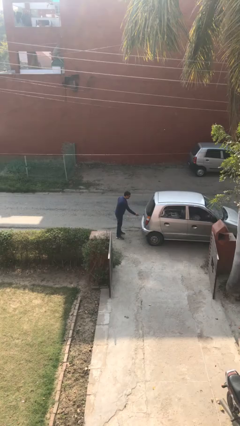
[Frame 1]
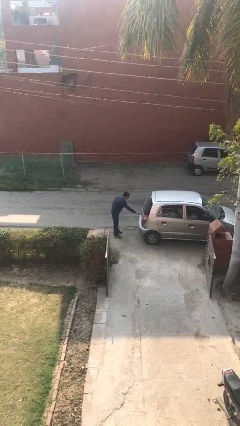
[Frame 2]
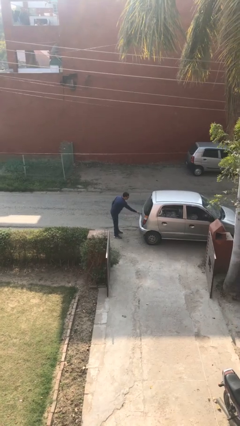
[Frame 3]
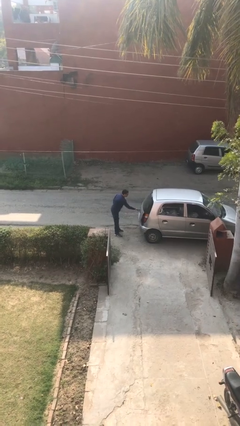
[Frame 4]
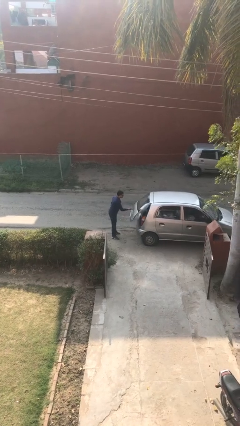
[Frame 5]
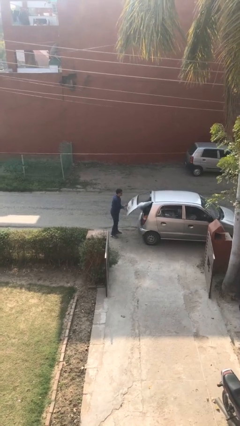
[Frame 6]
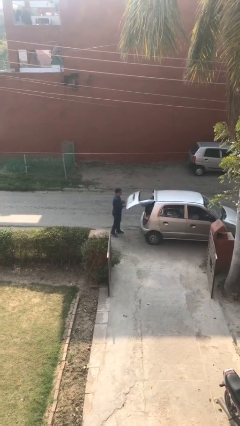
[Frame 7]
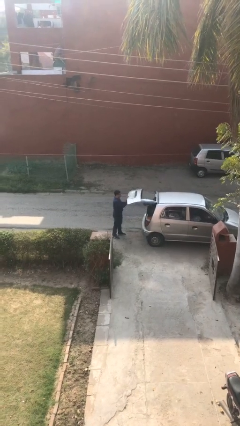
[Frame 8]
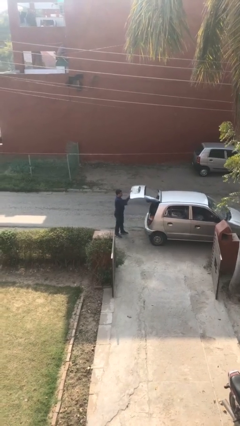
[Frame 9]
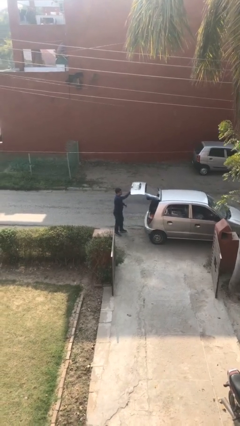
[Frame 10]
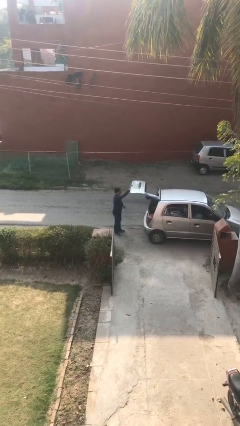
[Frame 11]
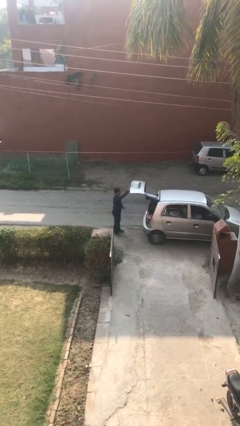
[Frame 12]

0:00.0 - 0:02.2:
person opens car trunk

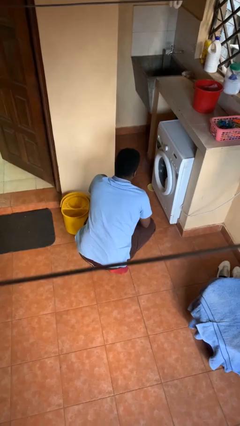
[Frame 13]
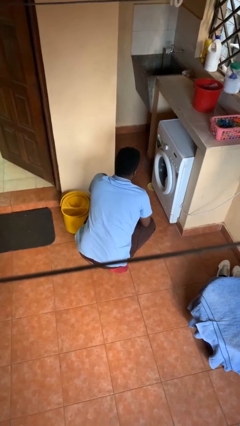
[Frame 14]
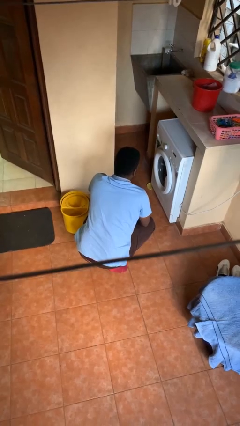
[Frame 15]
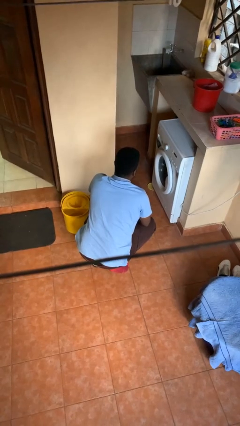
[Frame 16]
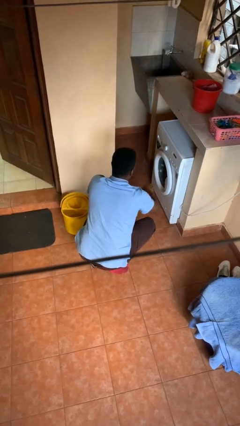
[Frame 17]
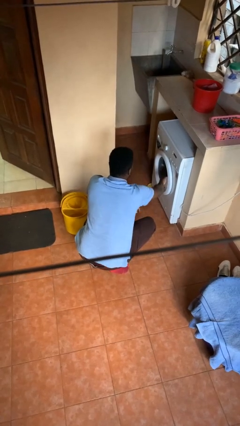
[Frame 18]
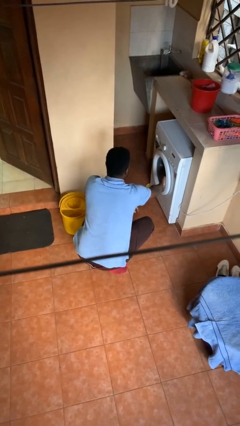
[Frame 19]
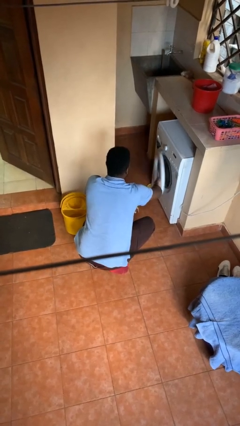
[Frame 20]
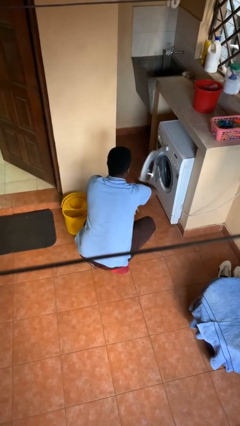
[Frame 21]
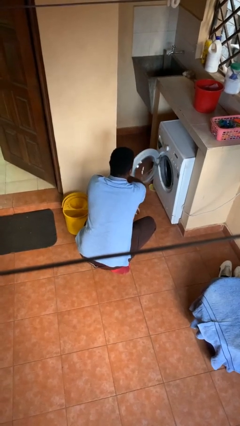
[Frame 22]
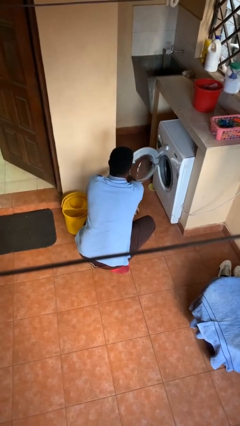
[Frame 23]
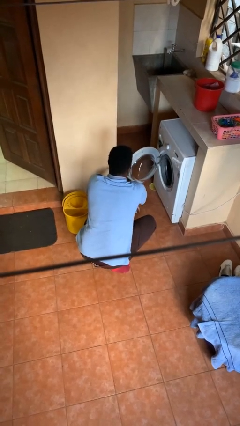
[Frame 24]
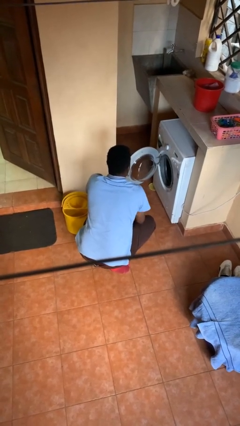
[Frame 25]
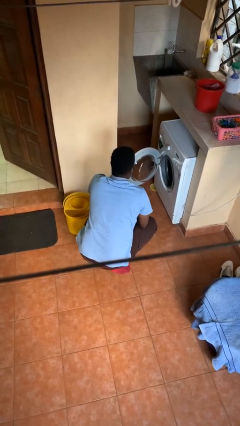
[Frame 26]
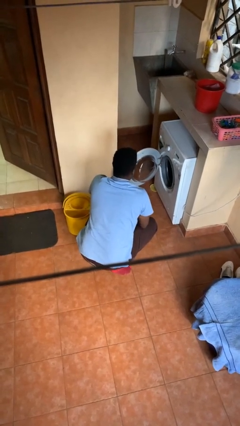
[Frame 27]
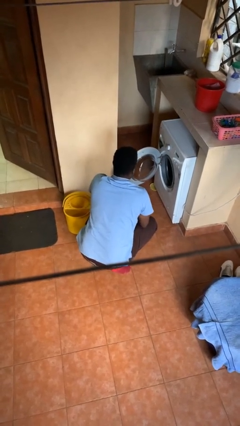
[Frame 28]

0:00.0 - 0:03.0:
person opens clothes washer

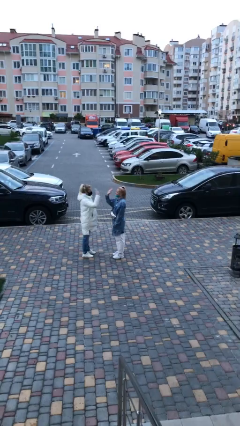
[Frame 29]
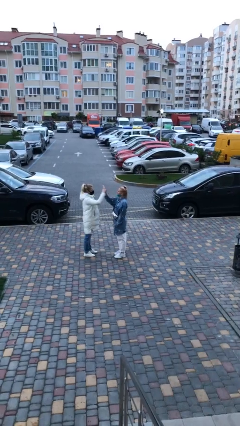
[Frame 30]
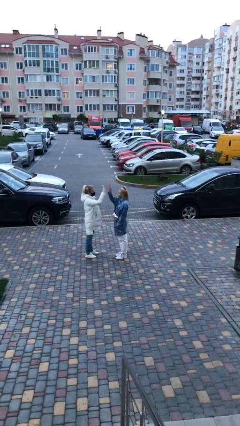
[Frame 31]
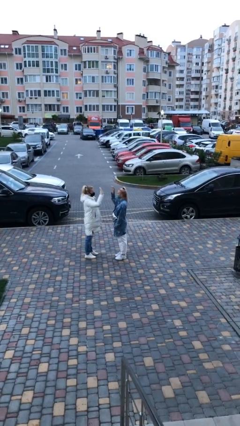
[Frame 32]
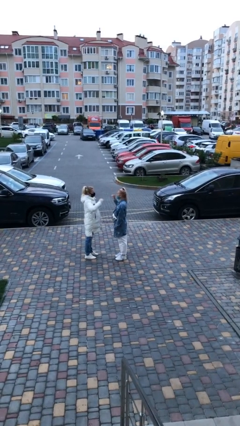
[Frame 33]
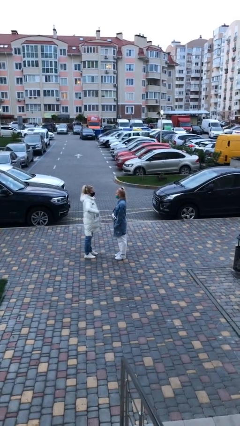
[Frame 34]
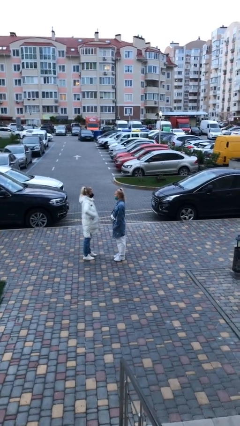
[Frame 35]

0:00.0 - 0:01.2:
person highfives hand

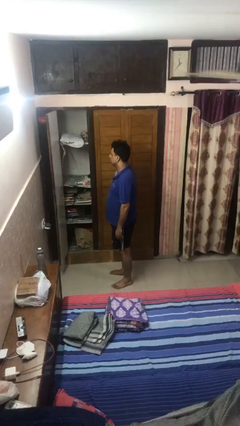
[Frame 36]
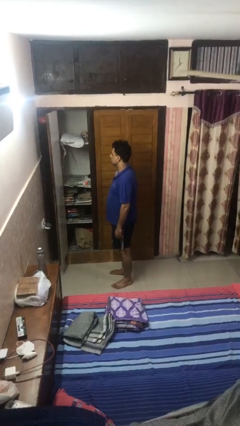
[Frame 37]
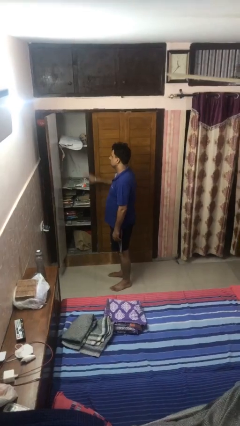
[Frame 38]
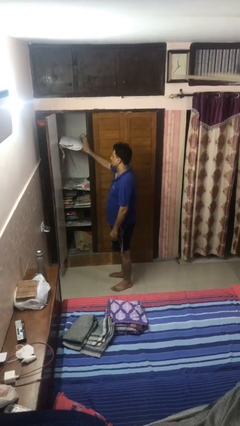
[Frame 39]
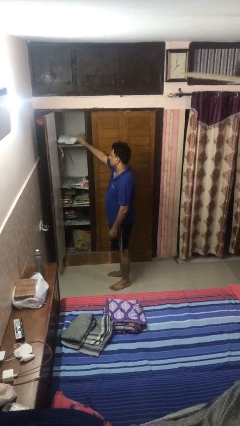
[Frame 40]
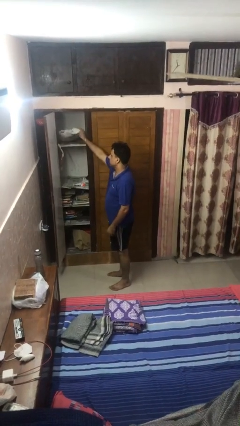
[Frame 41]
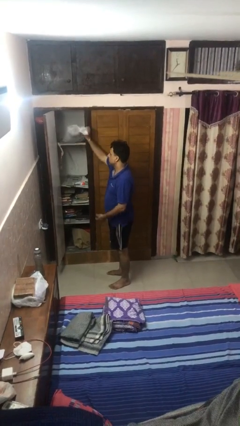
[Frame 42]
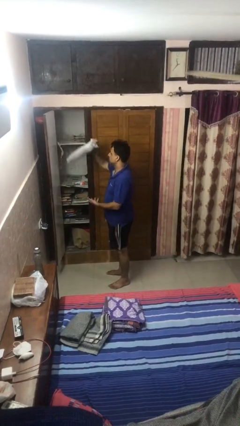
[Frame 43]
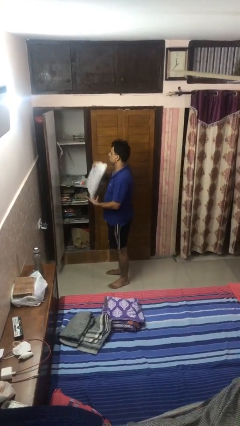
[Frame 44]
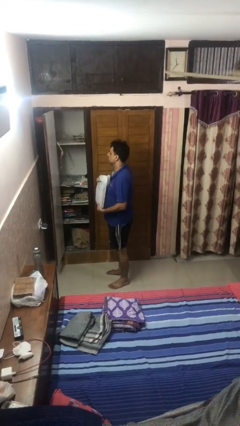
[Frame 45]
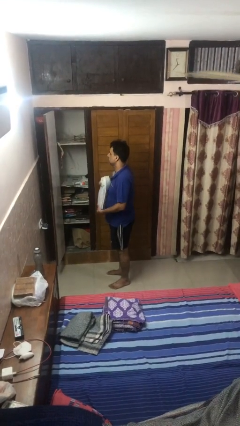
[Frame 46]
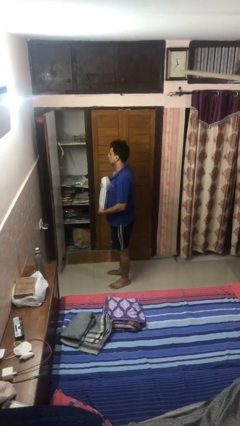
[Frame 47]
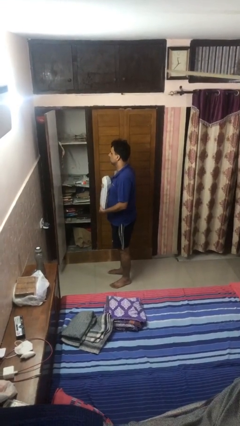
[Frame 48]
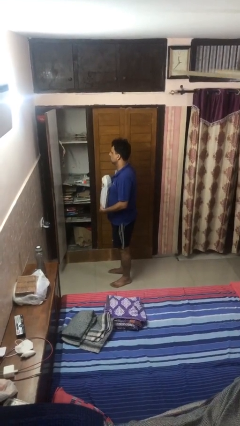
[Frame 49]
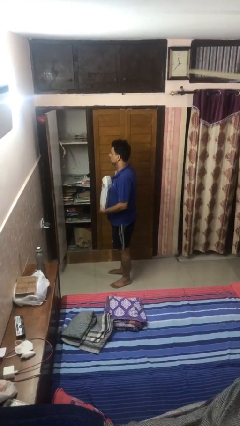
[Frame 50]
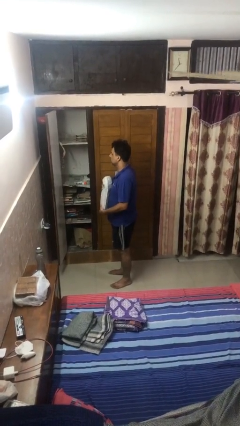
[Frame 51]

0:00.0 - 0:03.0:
person picks up object from shelf

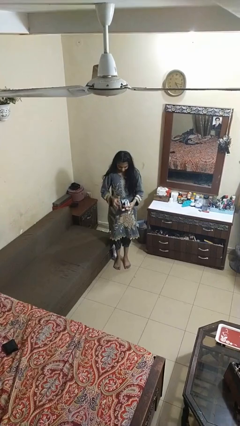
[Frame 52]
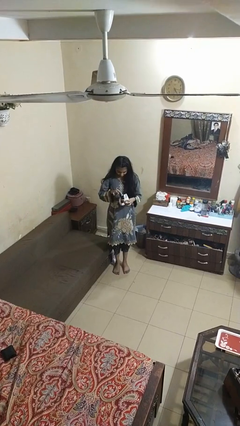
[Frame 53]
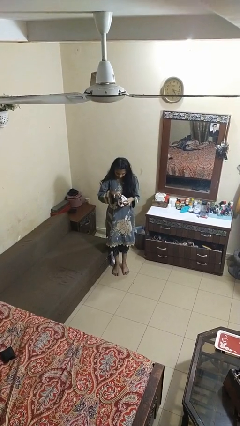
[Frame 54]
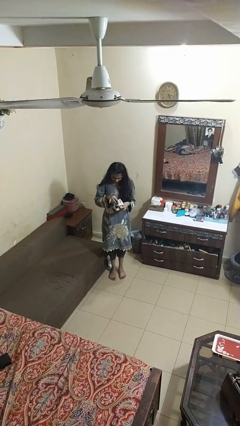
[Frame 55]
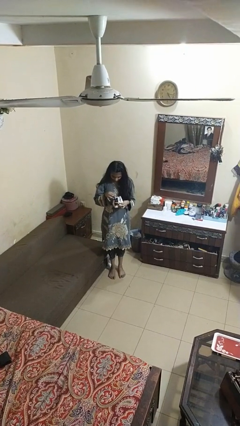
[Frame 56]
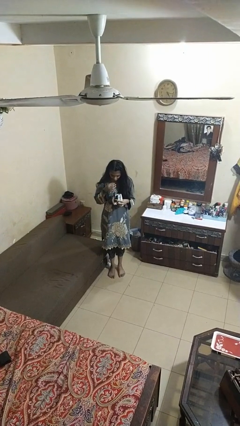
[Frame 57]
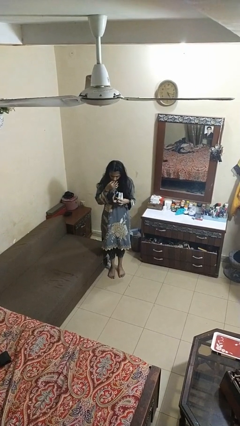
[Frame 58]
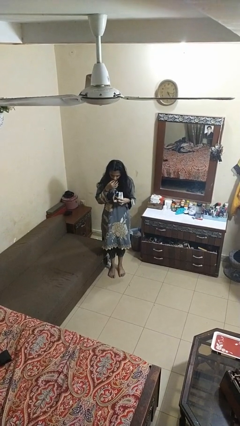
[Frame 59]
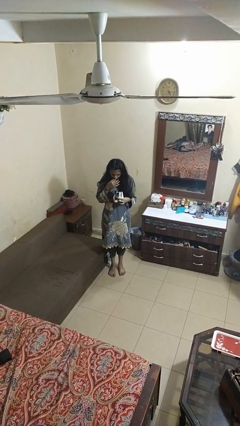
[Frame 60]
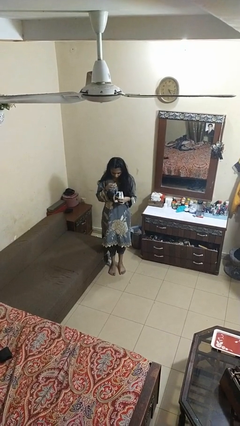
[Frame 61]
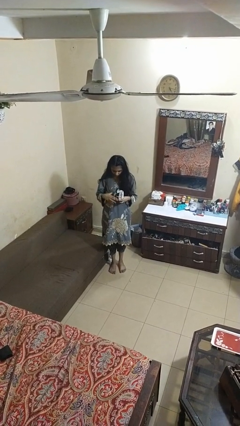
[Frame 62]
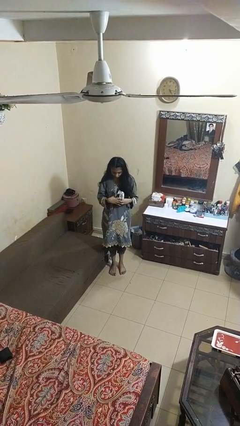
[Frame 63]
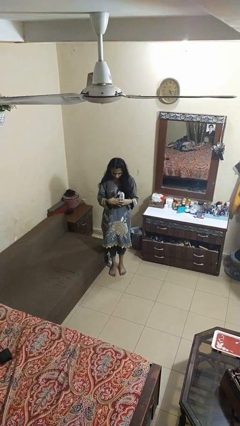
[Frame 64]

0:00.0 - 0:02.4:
person eats snack from bag

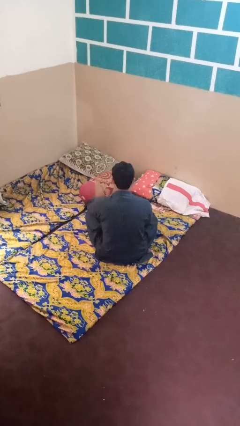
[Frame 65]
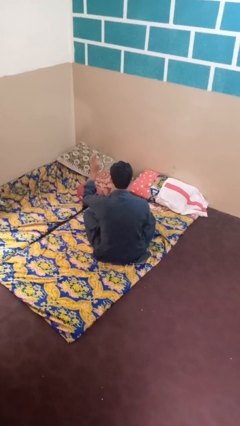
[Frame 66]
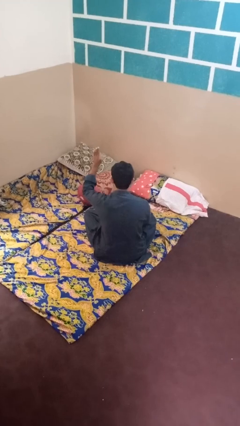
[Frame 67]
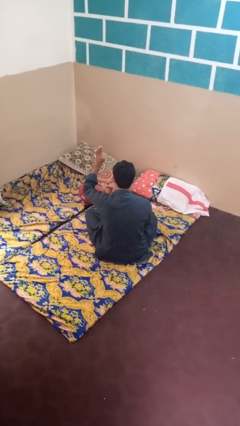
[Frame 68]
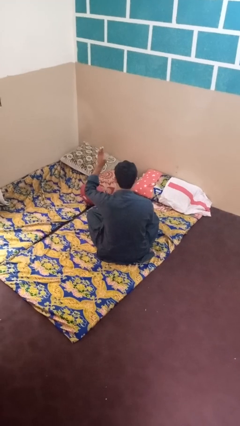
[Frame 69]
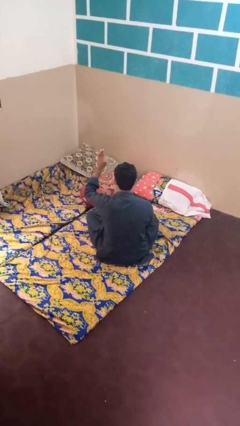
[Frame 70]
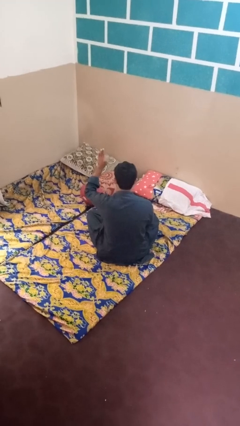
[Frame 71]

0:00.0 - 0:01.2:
person gestures number three

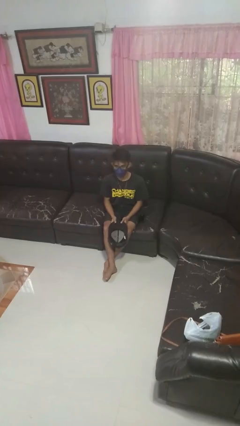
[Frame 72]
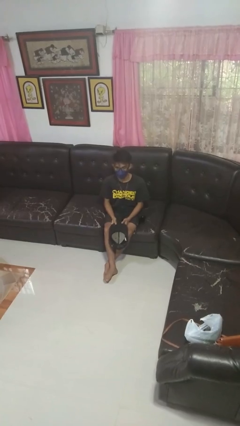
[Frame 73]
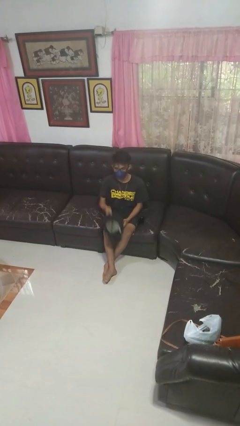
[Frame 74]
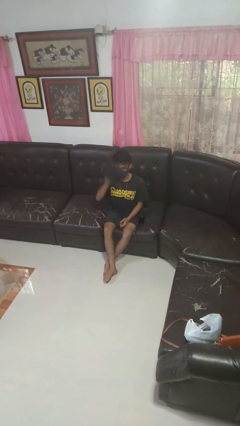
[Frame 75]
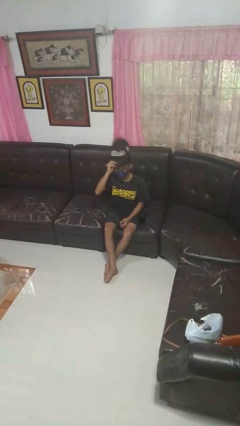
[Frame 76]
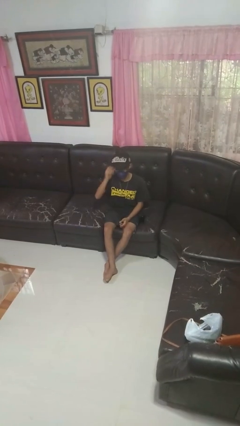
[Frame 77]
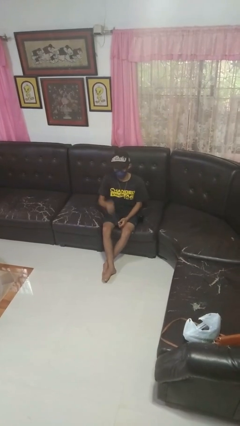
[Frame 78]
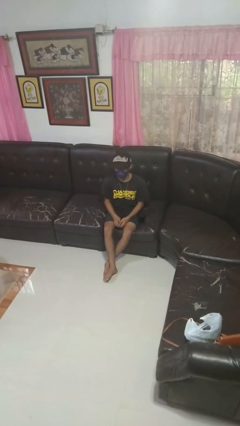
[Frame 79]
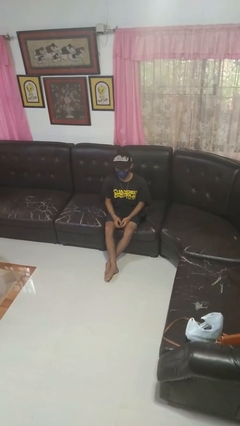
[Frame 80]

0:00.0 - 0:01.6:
person puts on hat

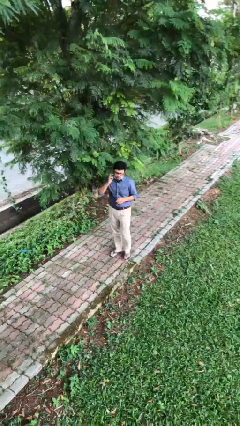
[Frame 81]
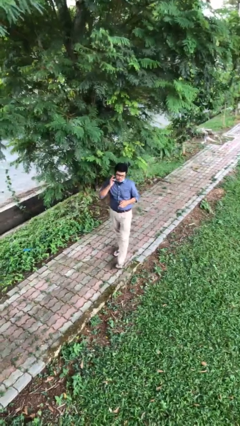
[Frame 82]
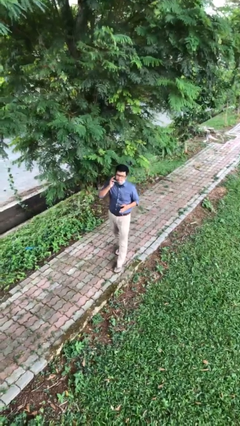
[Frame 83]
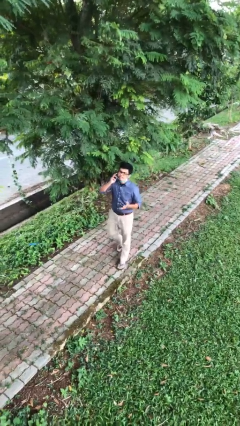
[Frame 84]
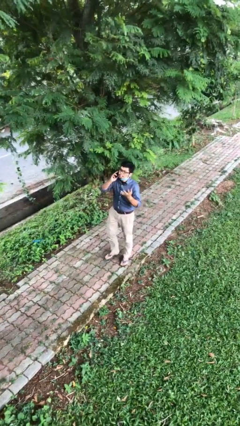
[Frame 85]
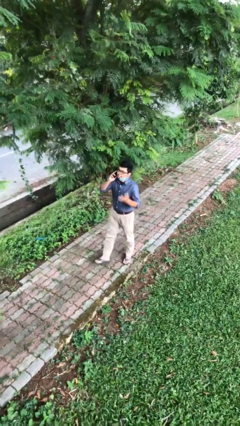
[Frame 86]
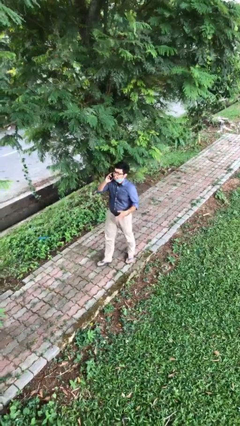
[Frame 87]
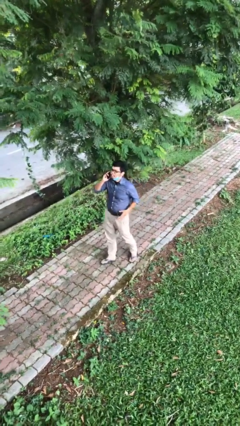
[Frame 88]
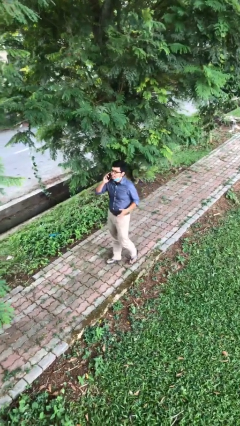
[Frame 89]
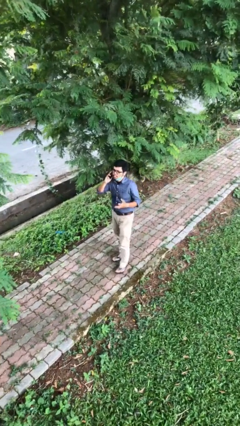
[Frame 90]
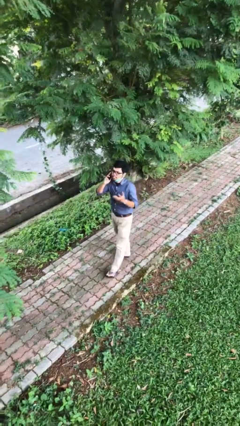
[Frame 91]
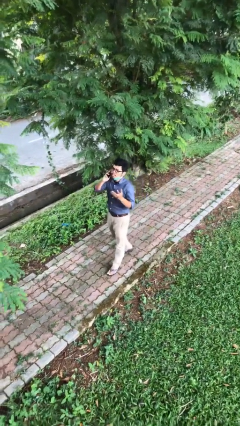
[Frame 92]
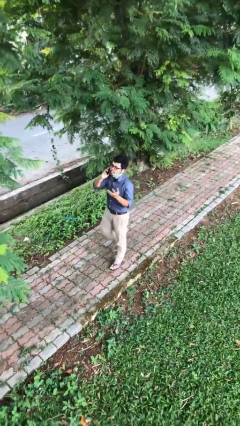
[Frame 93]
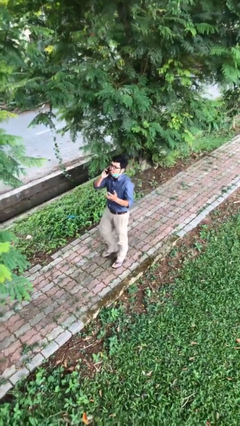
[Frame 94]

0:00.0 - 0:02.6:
person talks on phone
